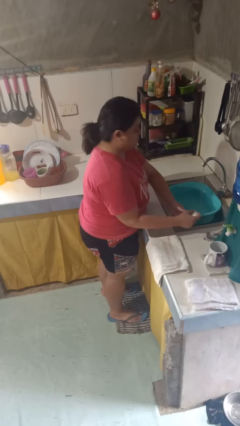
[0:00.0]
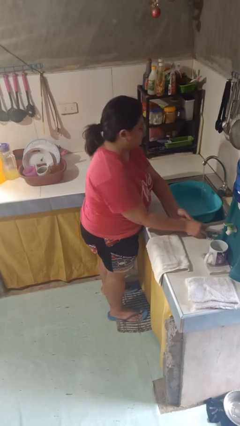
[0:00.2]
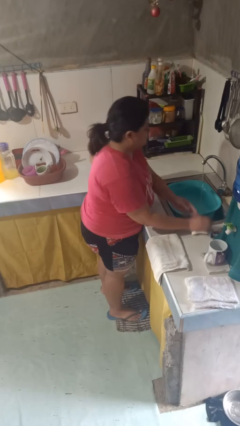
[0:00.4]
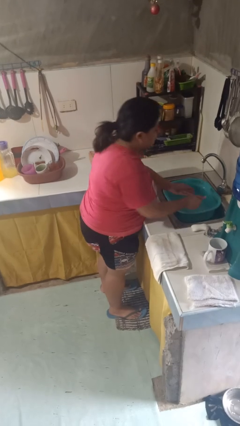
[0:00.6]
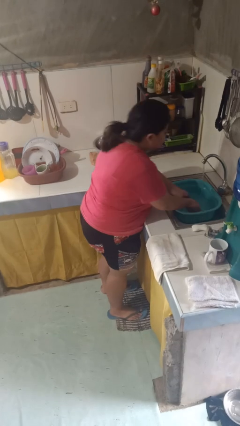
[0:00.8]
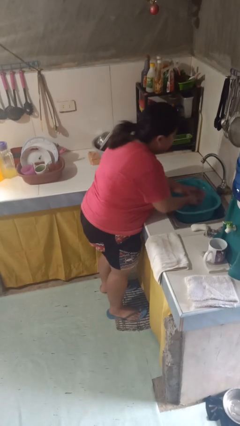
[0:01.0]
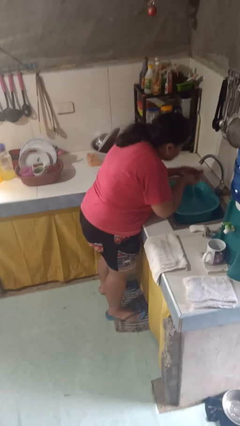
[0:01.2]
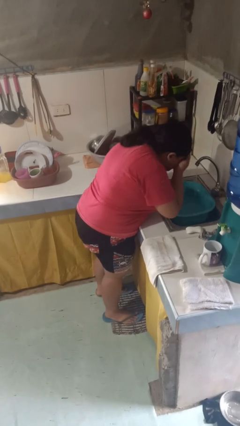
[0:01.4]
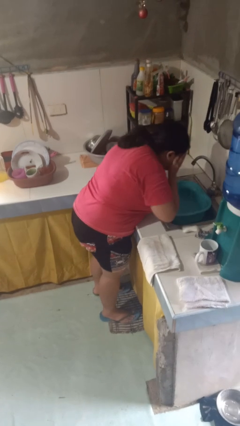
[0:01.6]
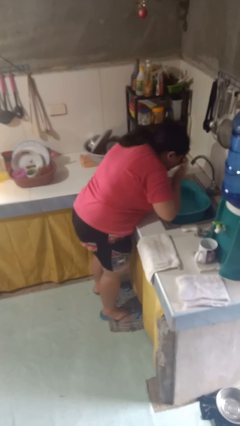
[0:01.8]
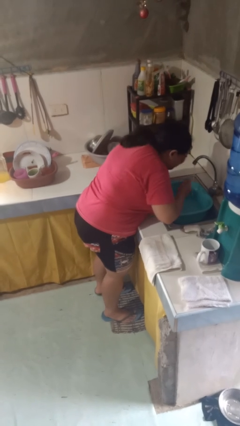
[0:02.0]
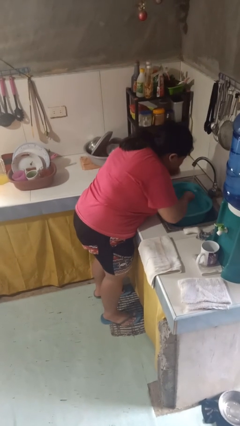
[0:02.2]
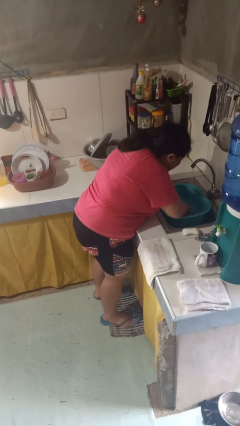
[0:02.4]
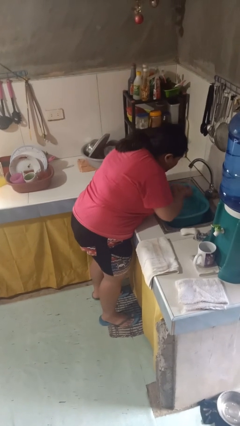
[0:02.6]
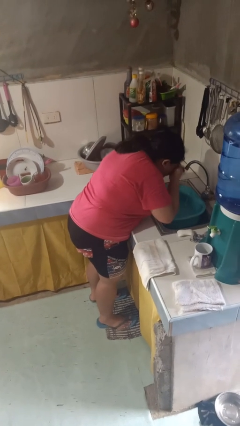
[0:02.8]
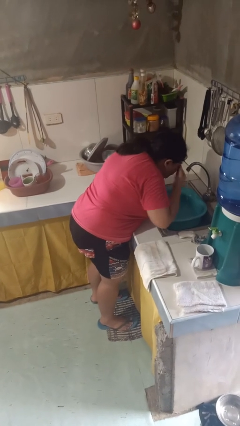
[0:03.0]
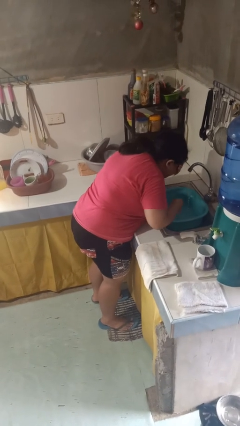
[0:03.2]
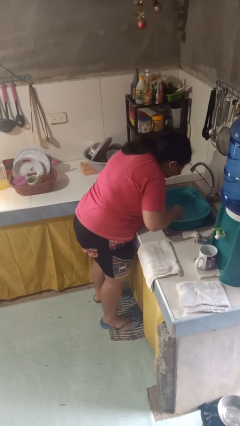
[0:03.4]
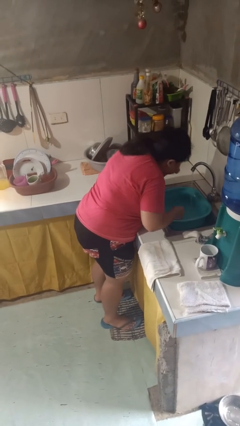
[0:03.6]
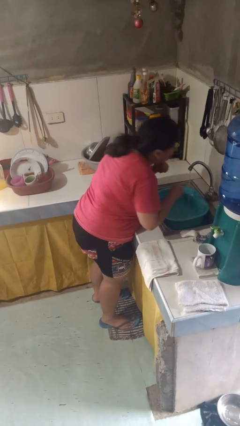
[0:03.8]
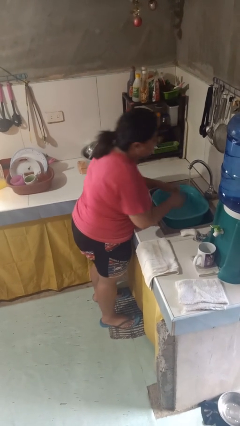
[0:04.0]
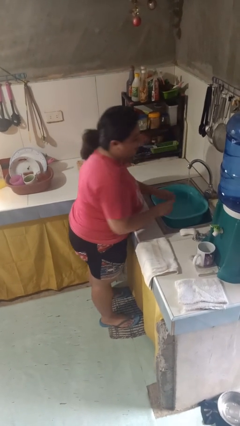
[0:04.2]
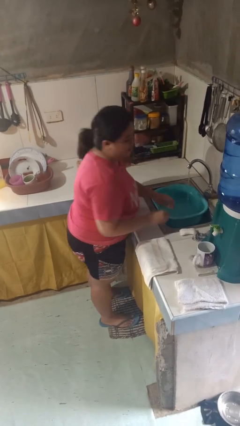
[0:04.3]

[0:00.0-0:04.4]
person washes face

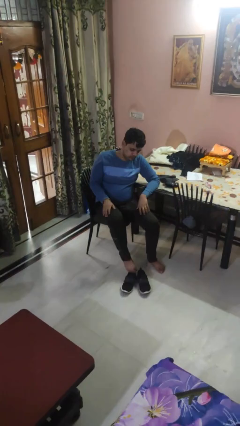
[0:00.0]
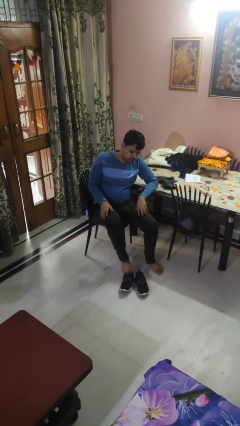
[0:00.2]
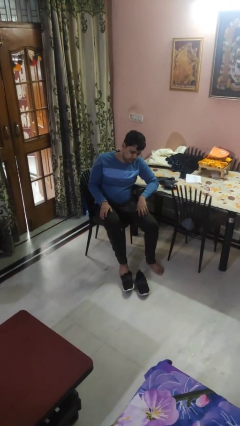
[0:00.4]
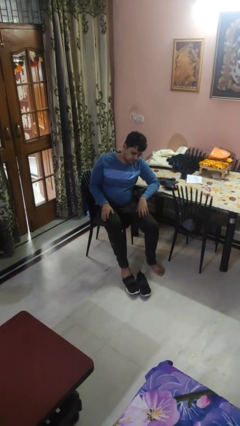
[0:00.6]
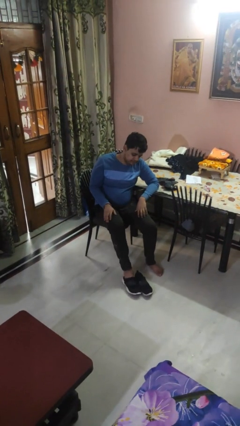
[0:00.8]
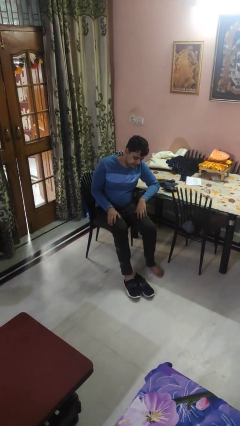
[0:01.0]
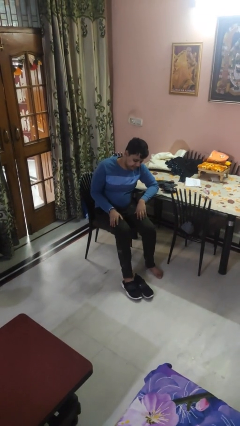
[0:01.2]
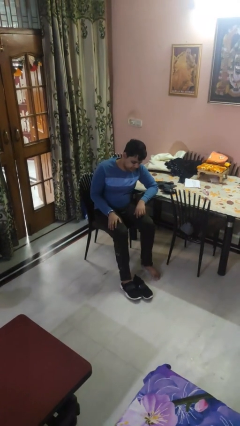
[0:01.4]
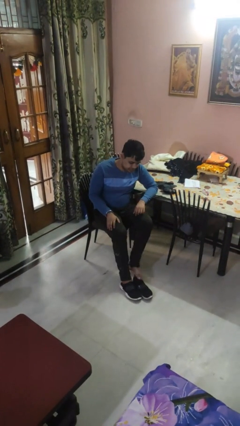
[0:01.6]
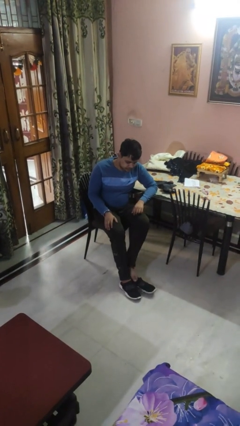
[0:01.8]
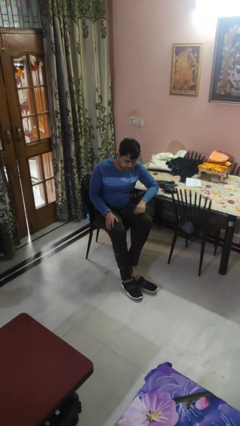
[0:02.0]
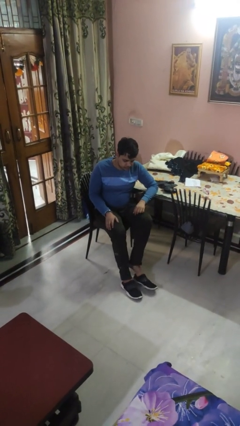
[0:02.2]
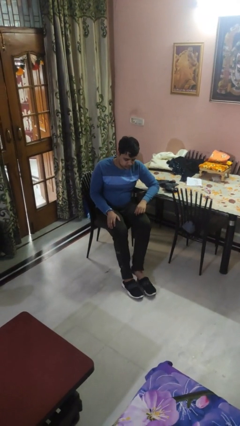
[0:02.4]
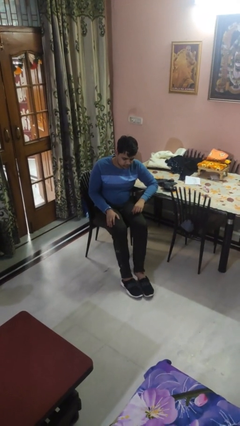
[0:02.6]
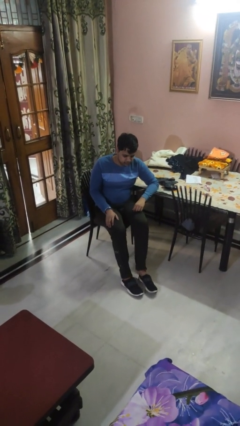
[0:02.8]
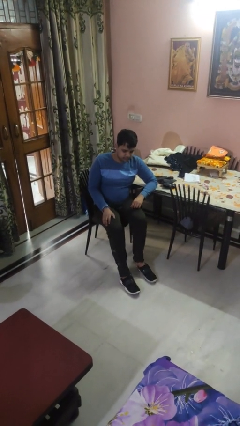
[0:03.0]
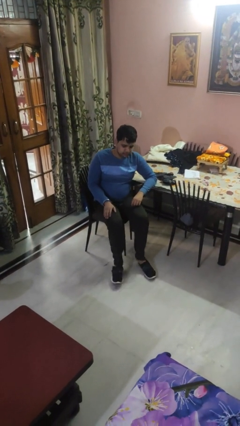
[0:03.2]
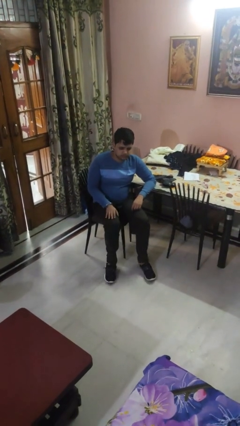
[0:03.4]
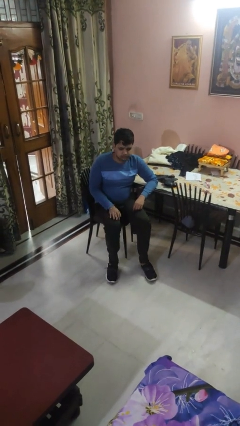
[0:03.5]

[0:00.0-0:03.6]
person puts on shoes

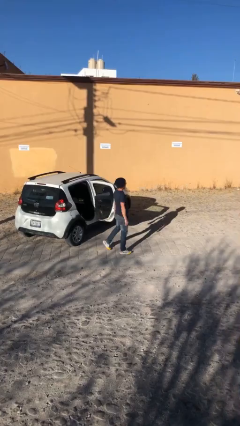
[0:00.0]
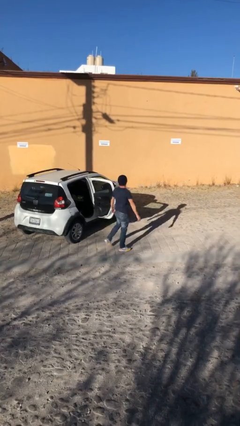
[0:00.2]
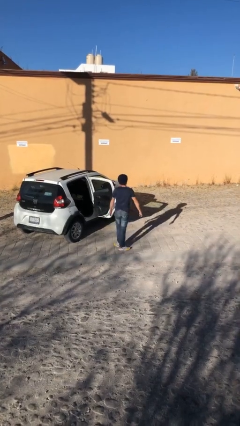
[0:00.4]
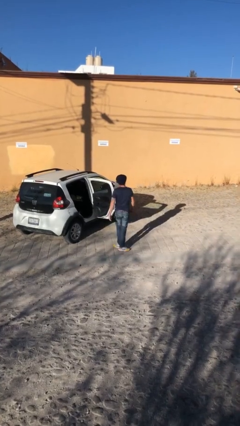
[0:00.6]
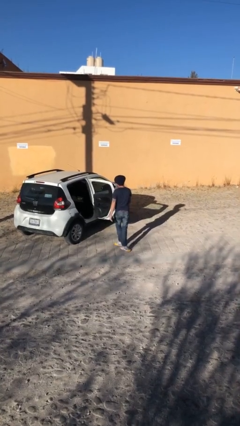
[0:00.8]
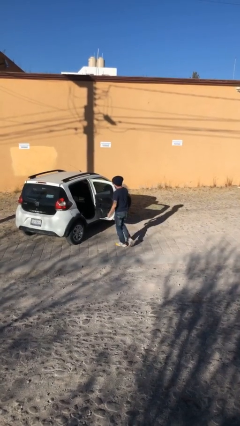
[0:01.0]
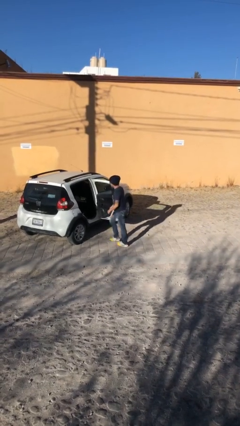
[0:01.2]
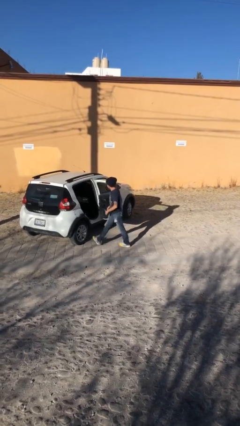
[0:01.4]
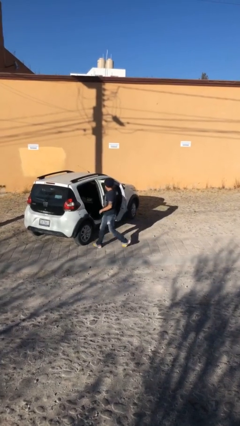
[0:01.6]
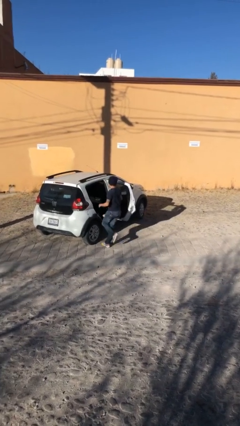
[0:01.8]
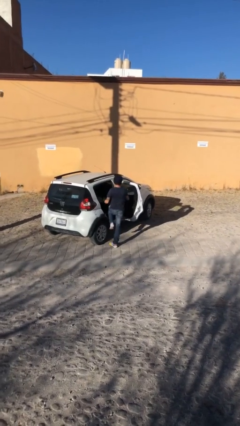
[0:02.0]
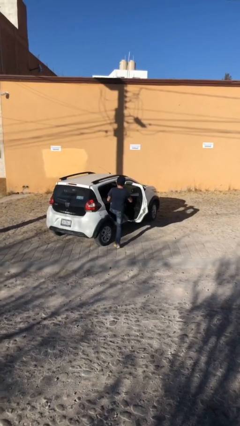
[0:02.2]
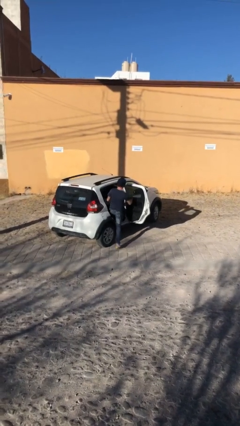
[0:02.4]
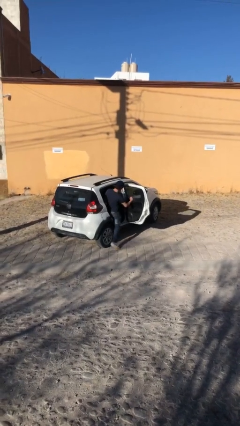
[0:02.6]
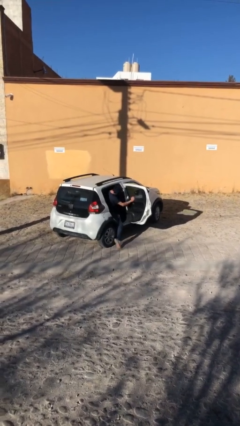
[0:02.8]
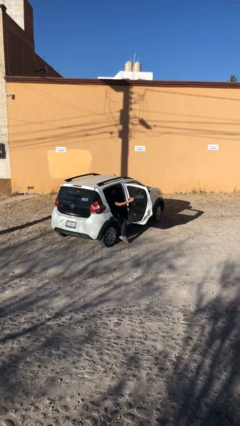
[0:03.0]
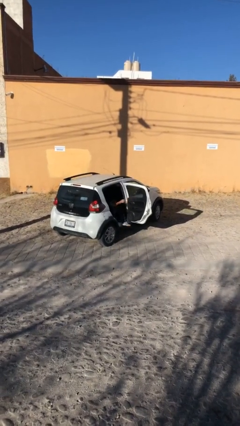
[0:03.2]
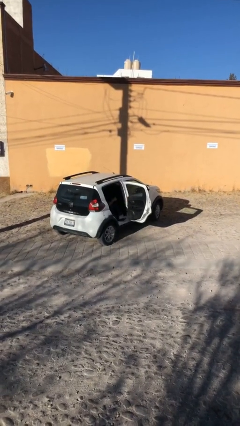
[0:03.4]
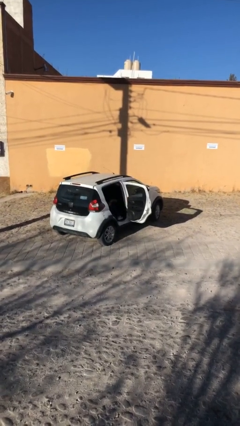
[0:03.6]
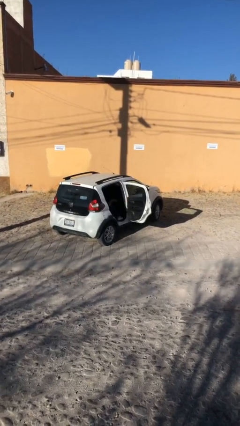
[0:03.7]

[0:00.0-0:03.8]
person enters car

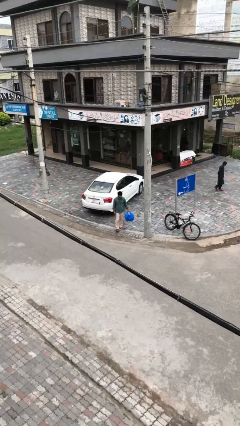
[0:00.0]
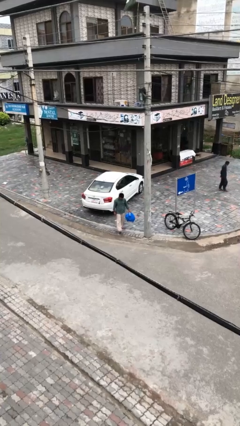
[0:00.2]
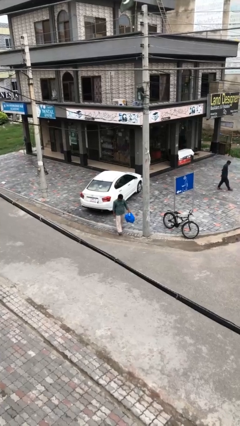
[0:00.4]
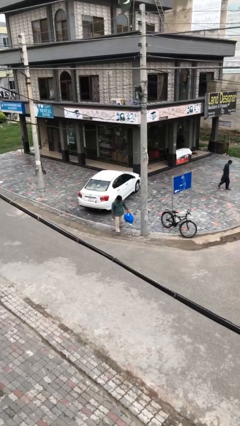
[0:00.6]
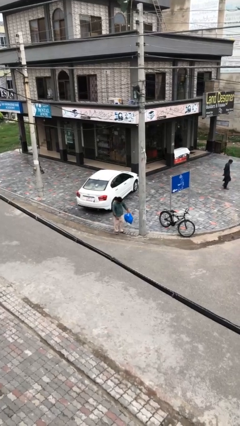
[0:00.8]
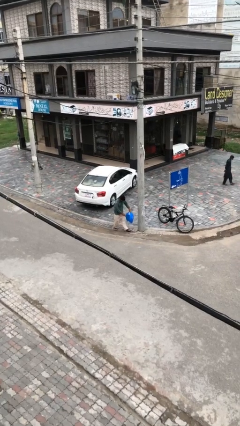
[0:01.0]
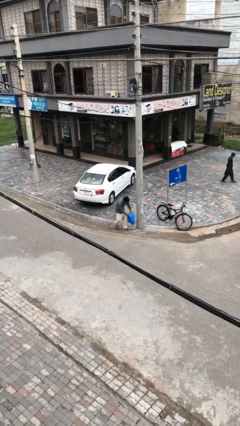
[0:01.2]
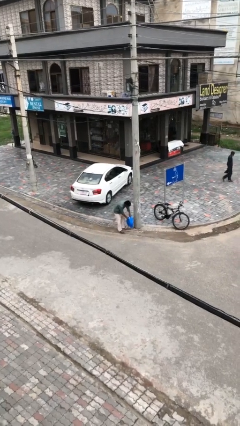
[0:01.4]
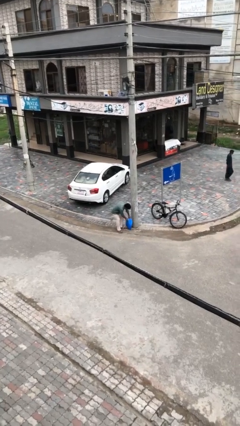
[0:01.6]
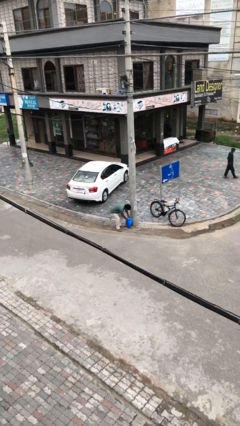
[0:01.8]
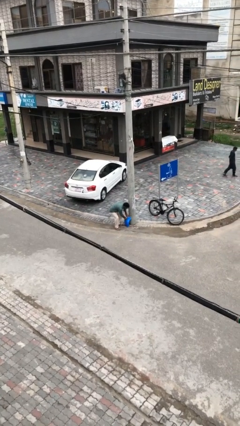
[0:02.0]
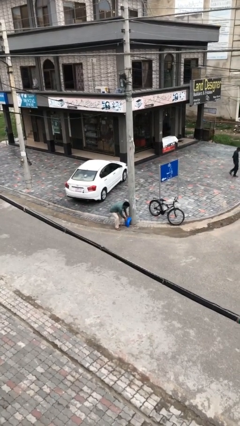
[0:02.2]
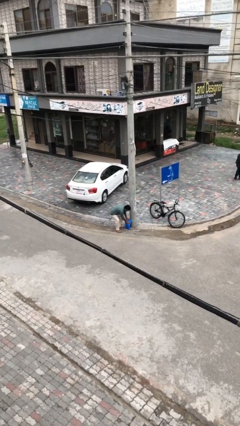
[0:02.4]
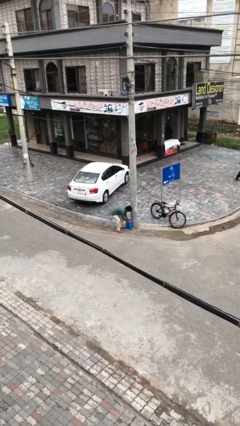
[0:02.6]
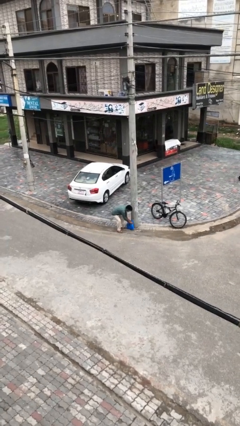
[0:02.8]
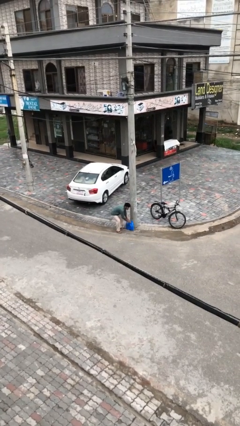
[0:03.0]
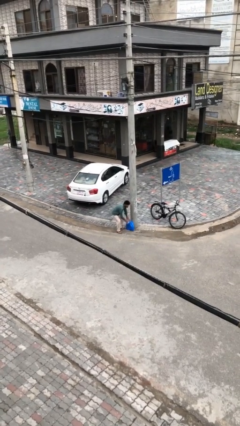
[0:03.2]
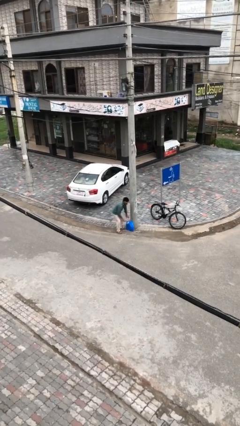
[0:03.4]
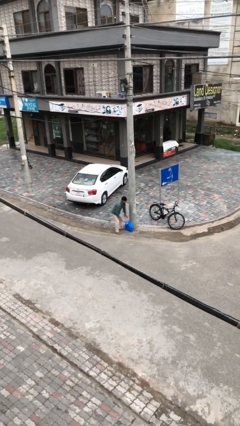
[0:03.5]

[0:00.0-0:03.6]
person puts down object on floor

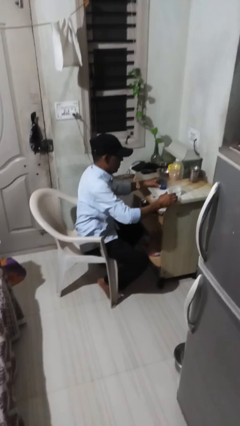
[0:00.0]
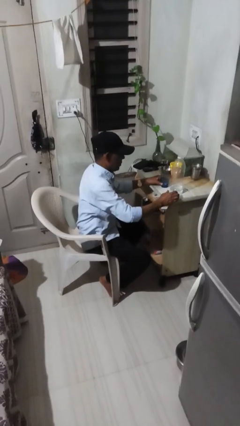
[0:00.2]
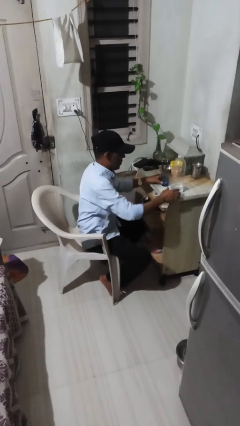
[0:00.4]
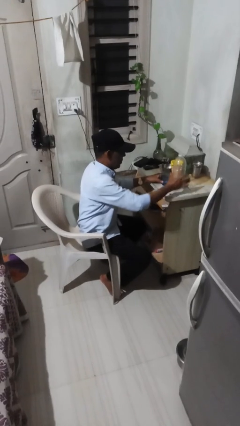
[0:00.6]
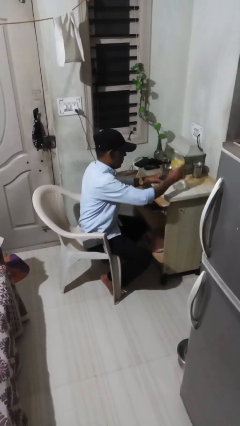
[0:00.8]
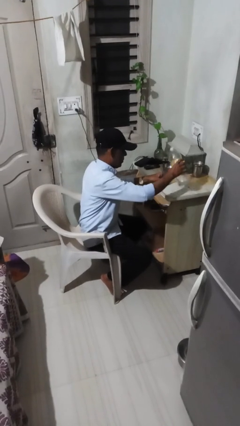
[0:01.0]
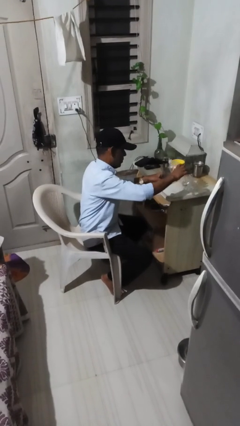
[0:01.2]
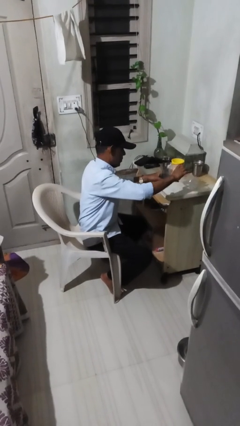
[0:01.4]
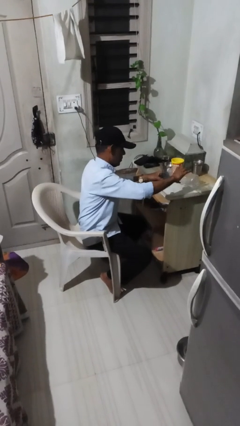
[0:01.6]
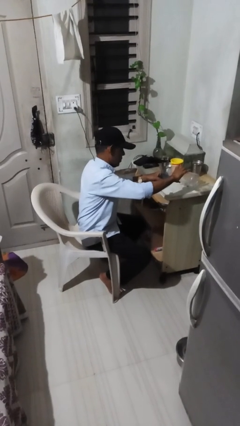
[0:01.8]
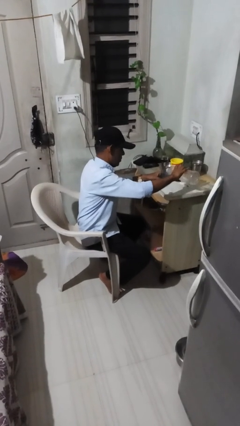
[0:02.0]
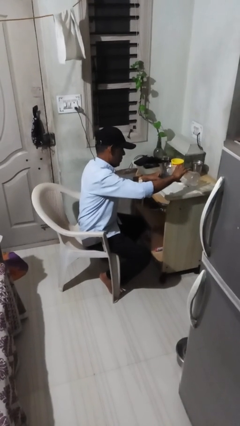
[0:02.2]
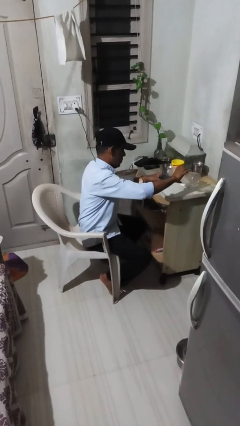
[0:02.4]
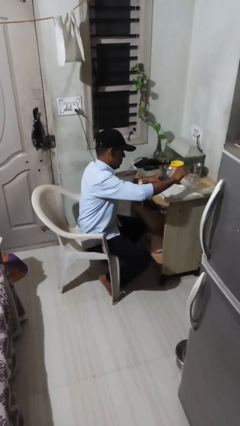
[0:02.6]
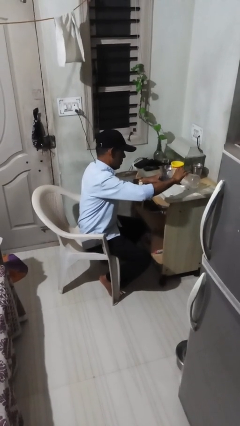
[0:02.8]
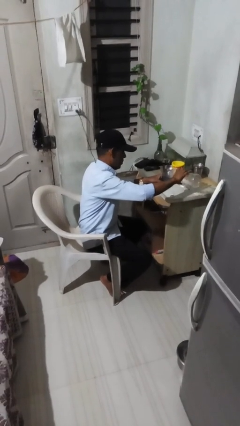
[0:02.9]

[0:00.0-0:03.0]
person pours liquid into cup
